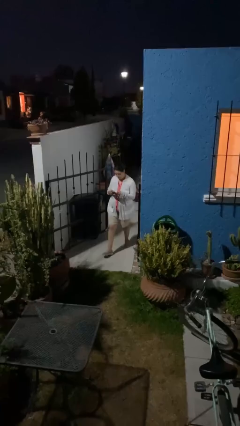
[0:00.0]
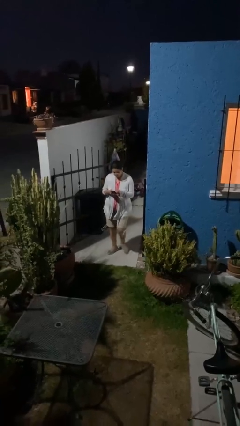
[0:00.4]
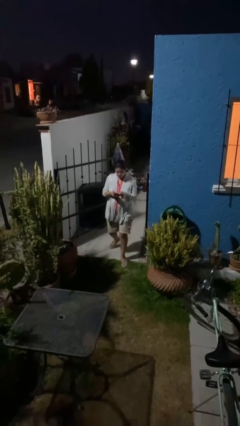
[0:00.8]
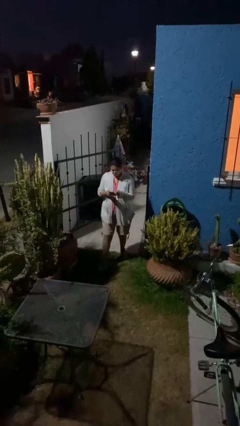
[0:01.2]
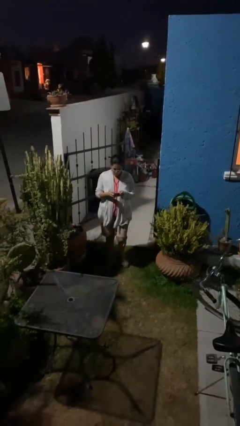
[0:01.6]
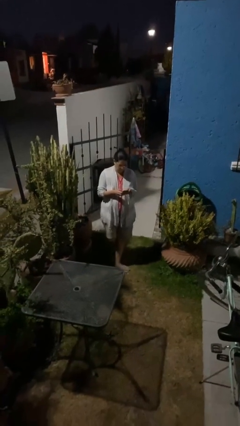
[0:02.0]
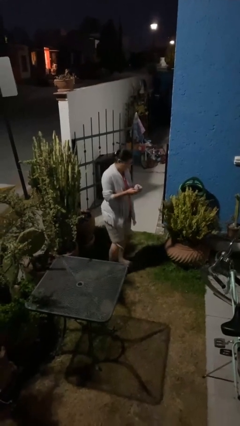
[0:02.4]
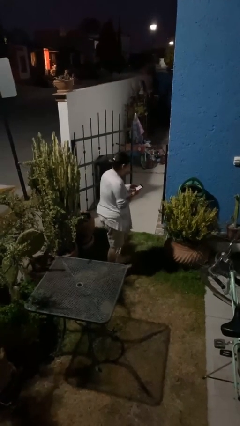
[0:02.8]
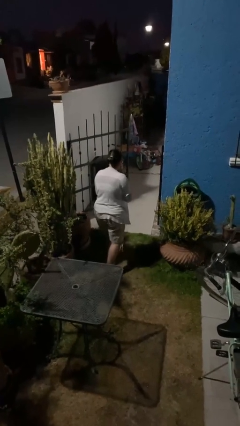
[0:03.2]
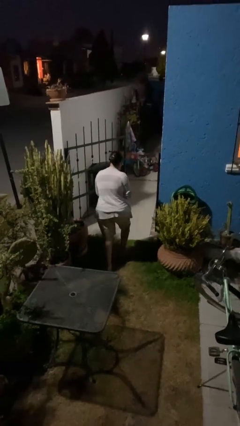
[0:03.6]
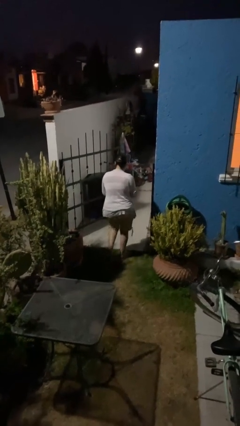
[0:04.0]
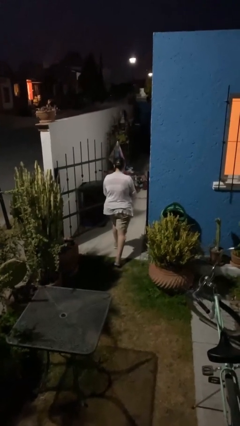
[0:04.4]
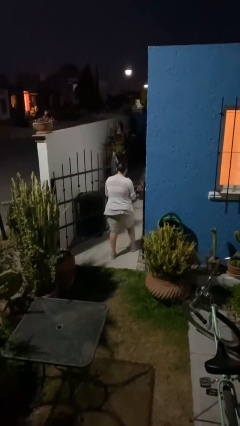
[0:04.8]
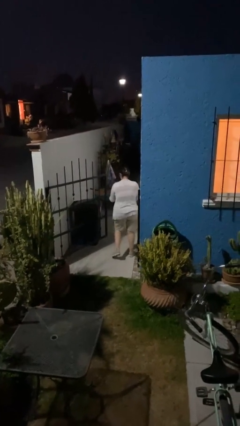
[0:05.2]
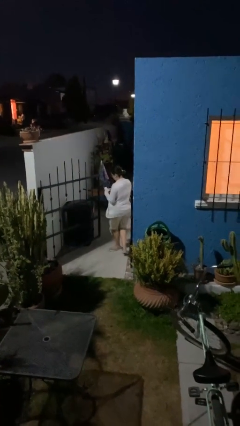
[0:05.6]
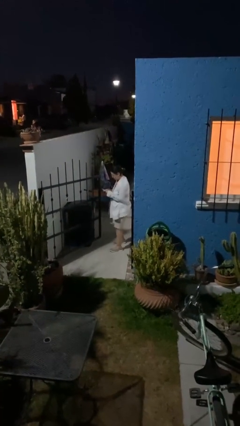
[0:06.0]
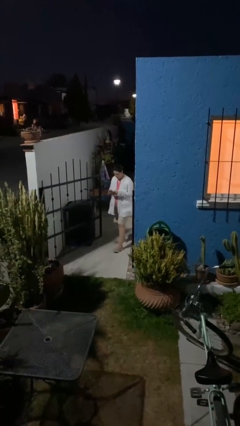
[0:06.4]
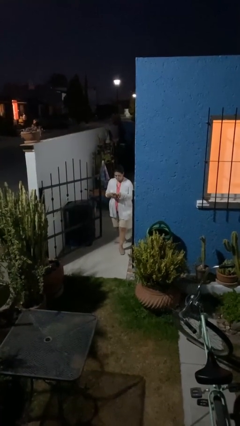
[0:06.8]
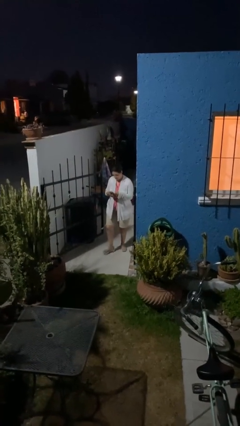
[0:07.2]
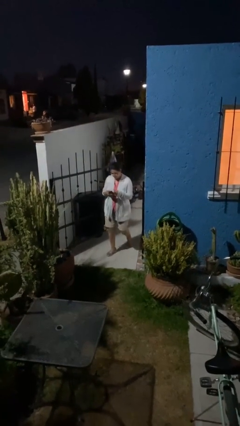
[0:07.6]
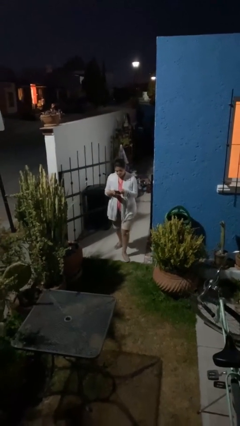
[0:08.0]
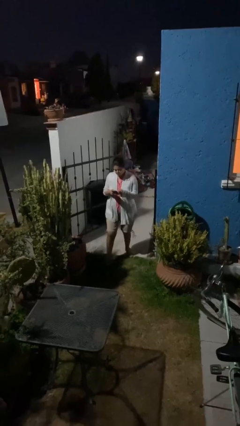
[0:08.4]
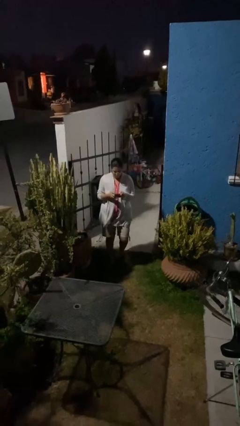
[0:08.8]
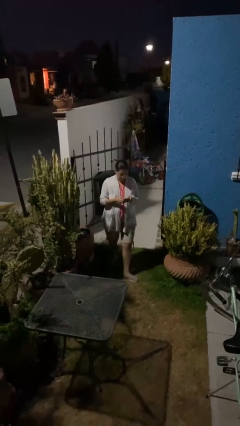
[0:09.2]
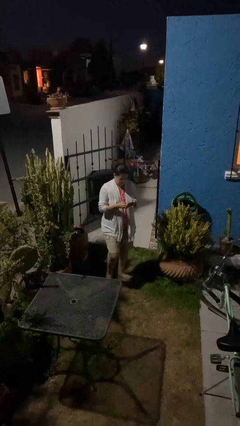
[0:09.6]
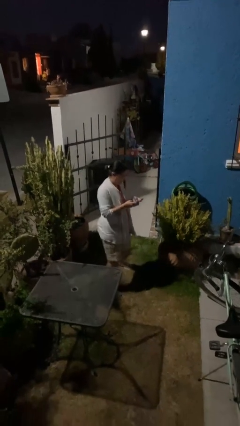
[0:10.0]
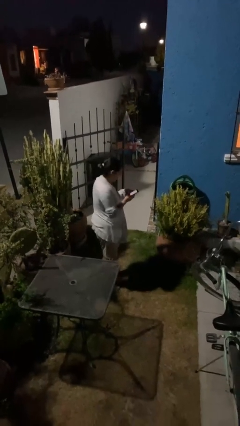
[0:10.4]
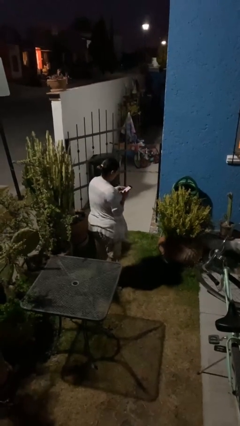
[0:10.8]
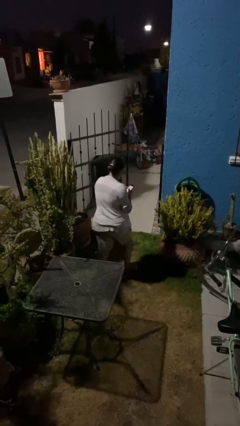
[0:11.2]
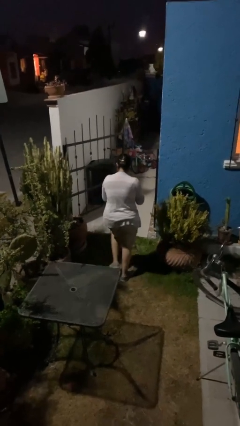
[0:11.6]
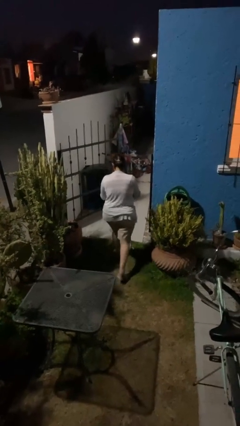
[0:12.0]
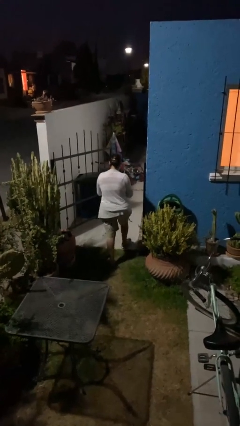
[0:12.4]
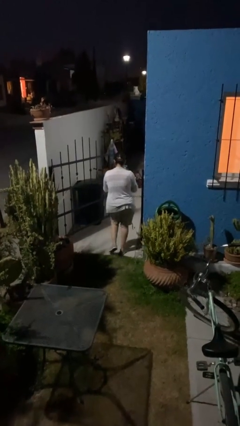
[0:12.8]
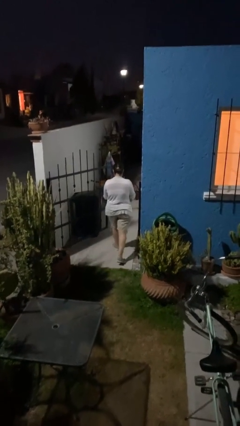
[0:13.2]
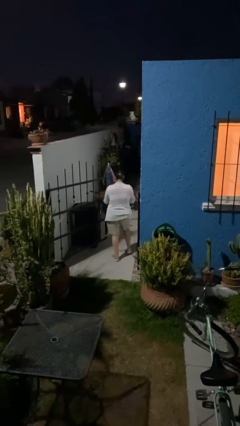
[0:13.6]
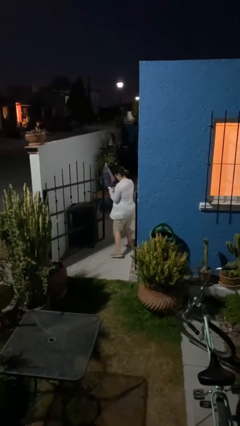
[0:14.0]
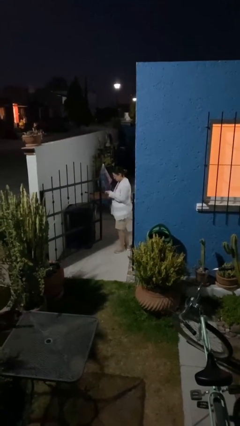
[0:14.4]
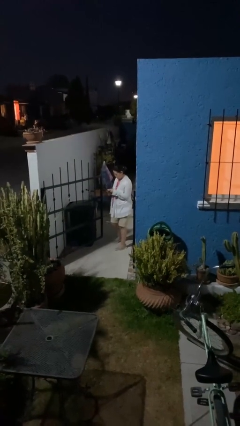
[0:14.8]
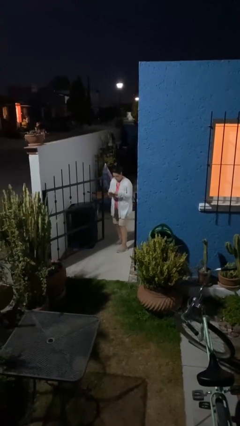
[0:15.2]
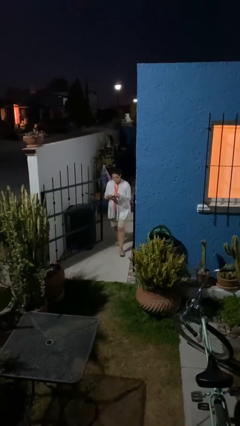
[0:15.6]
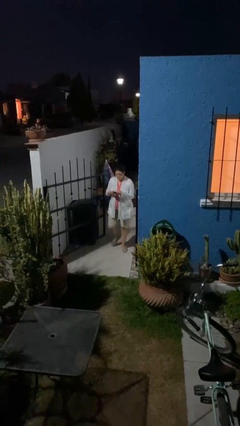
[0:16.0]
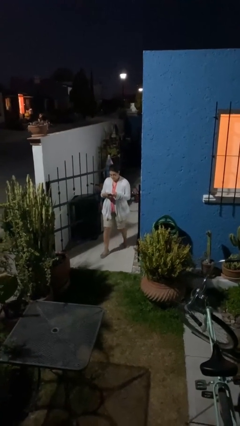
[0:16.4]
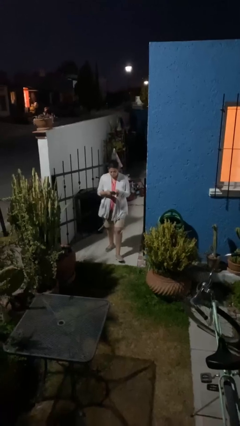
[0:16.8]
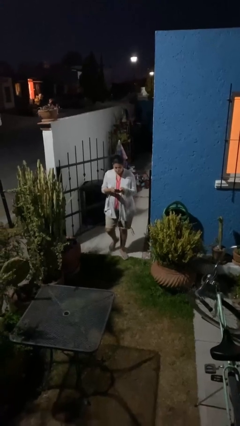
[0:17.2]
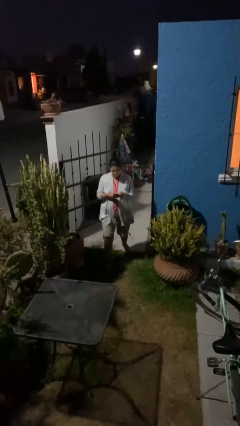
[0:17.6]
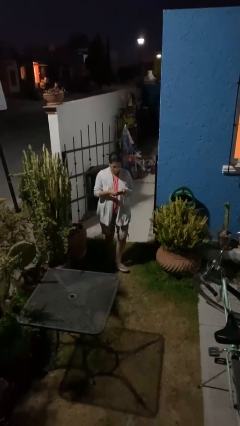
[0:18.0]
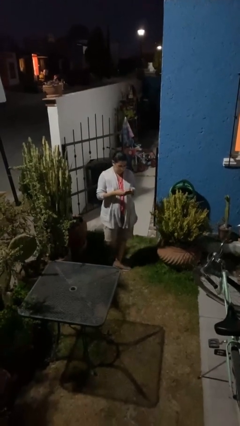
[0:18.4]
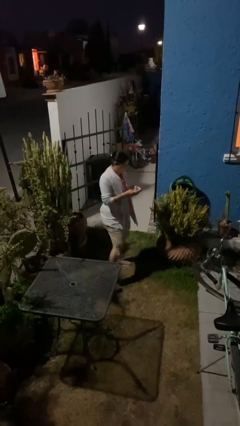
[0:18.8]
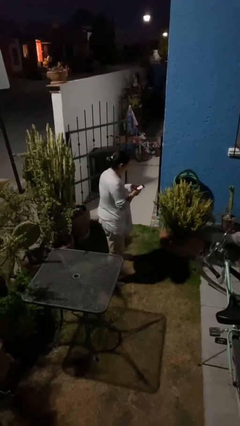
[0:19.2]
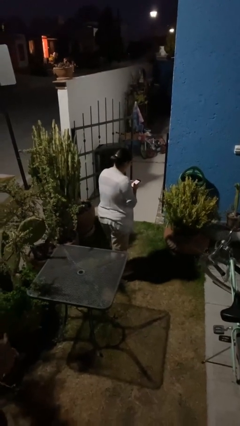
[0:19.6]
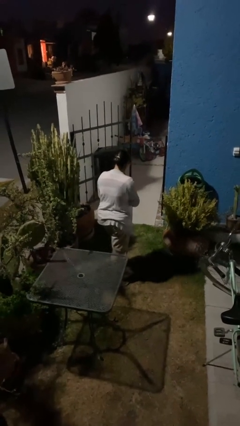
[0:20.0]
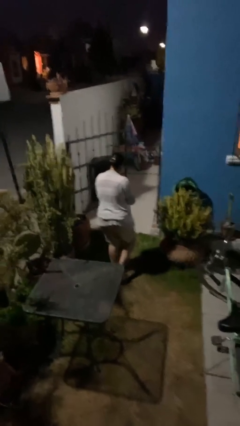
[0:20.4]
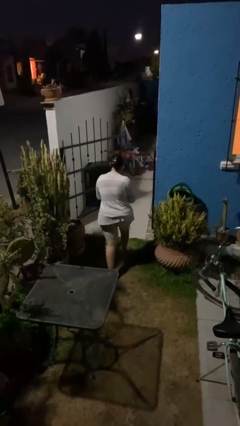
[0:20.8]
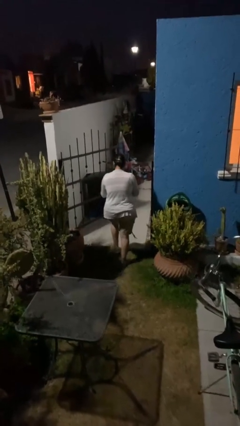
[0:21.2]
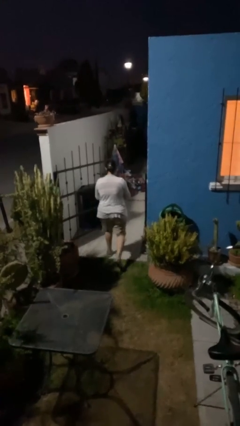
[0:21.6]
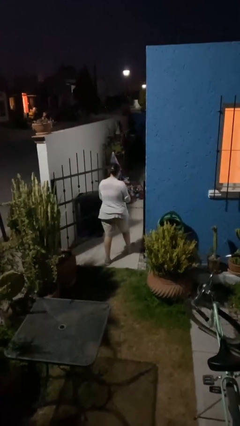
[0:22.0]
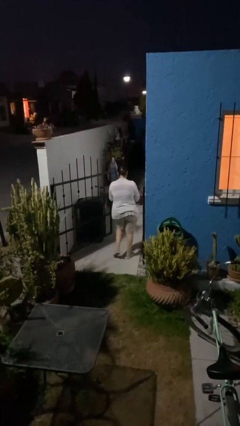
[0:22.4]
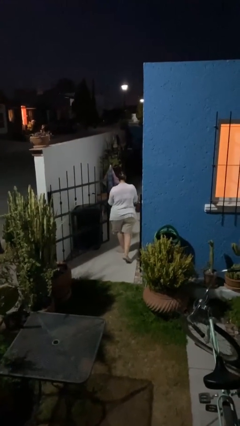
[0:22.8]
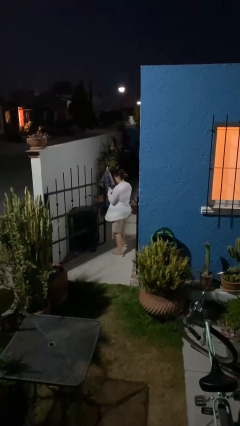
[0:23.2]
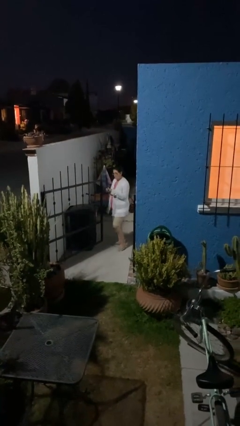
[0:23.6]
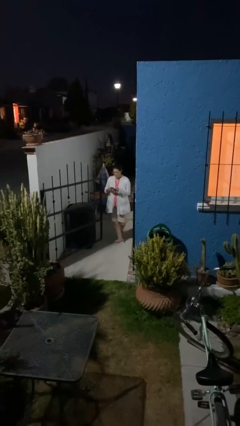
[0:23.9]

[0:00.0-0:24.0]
person texts on phone

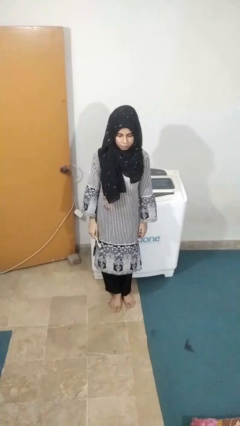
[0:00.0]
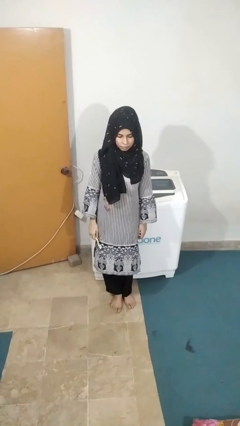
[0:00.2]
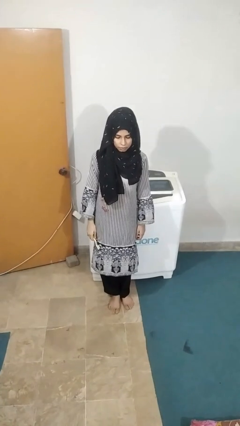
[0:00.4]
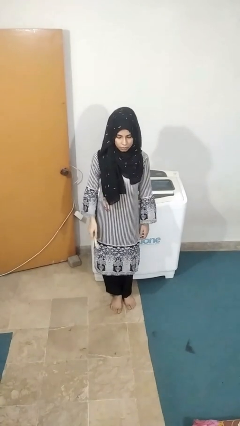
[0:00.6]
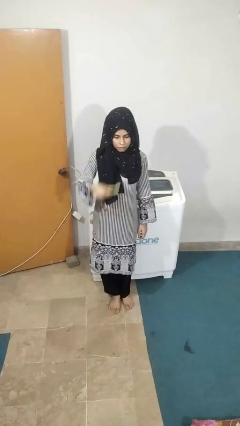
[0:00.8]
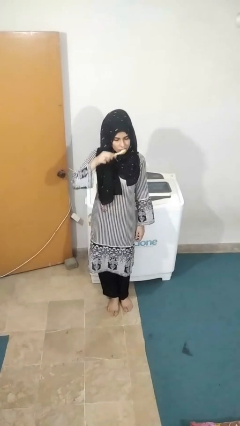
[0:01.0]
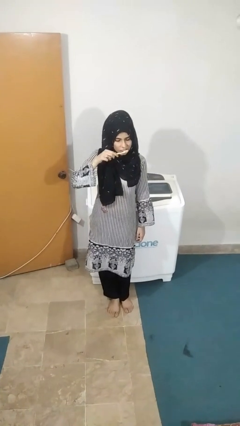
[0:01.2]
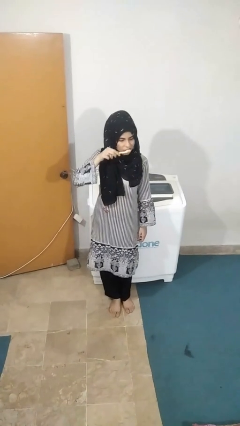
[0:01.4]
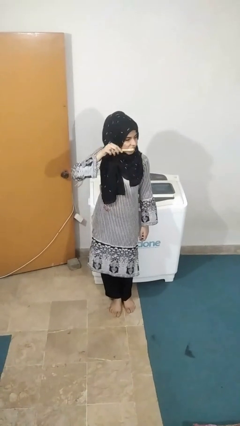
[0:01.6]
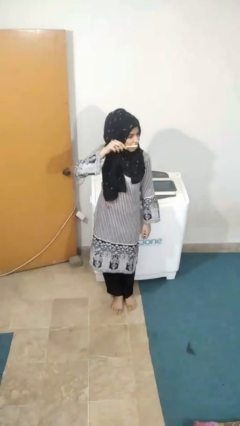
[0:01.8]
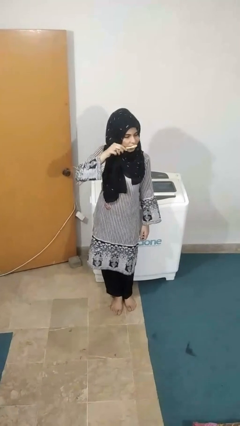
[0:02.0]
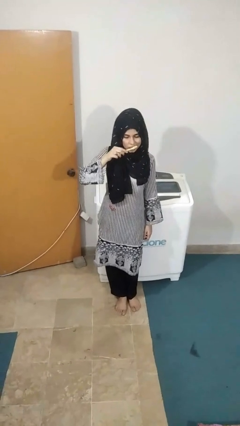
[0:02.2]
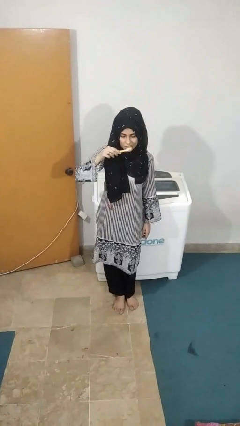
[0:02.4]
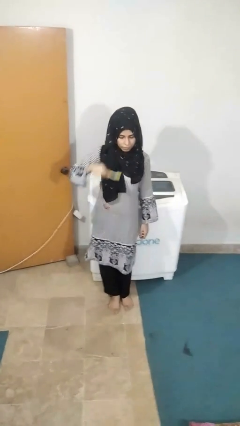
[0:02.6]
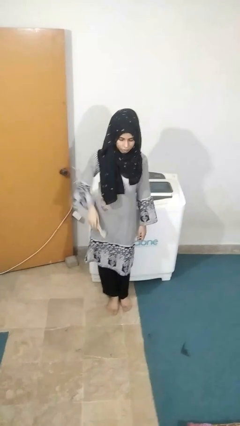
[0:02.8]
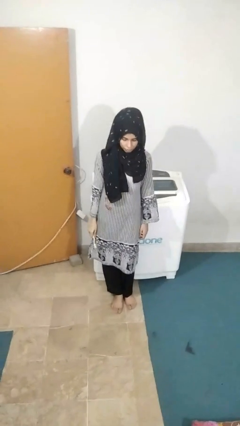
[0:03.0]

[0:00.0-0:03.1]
person brushes teeth

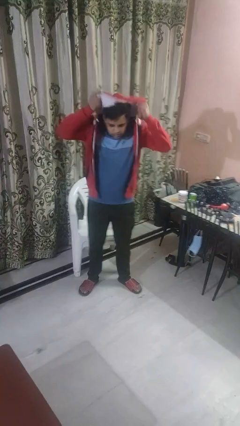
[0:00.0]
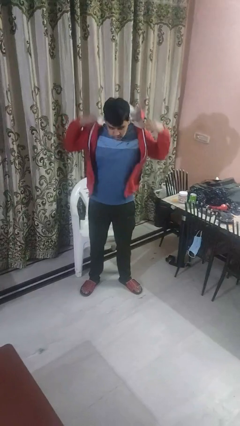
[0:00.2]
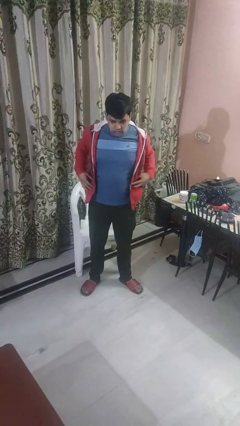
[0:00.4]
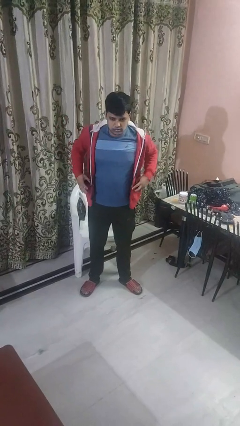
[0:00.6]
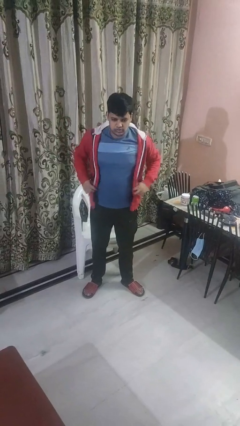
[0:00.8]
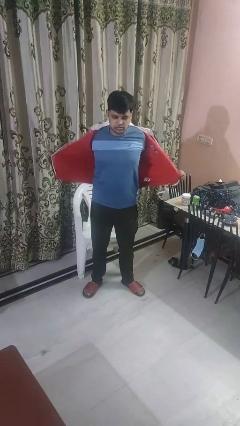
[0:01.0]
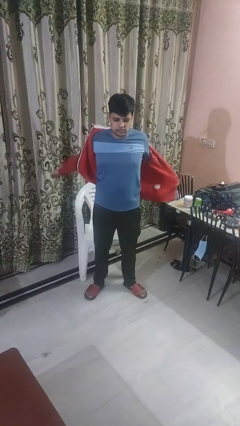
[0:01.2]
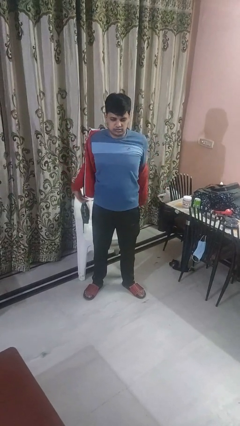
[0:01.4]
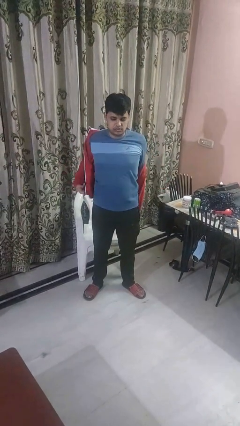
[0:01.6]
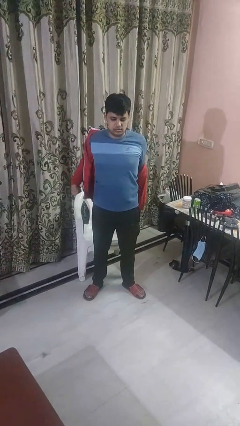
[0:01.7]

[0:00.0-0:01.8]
person takes off hoodie

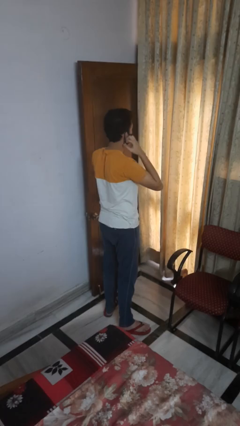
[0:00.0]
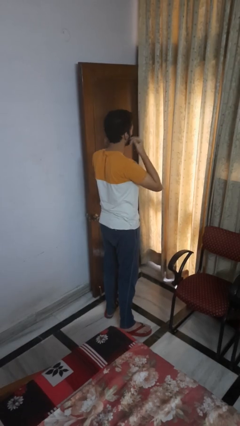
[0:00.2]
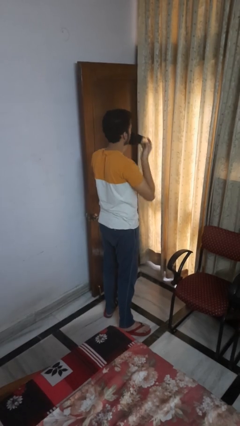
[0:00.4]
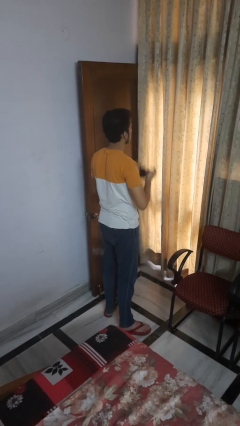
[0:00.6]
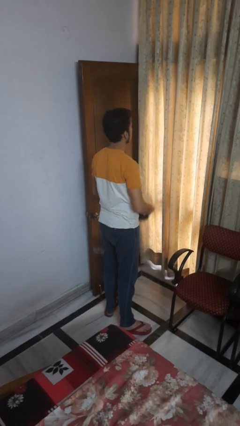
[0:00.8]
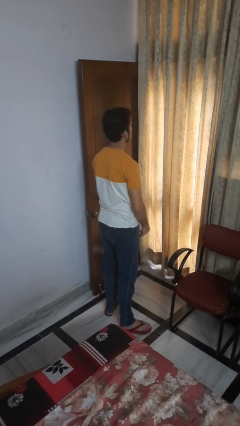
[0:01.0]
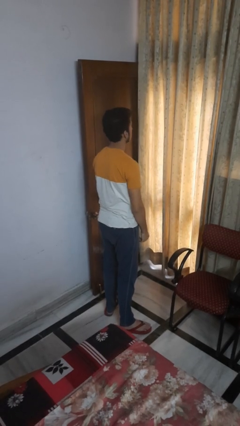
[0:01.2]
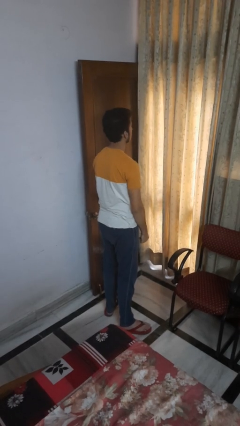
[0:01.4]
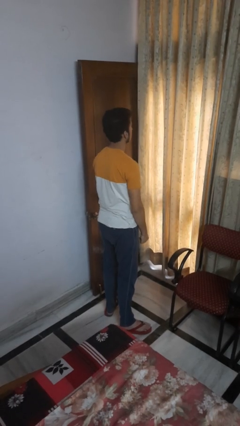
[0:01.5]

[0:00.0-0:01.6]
person takes off facemask
